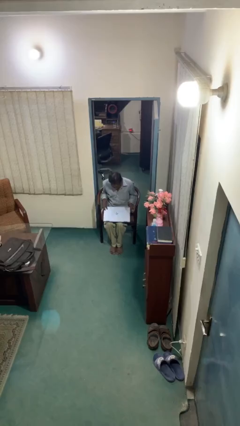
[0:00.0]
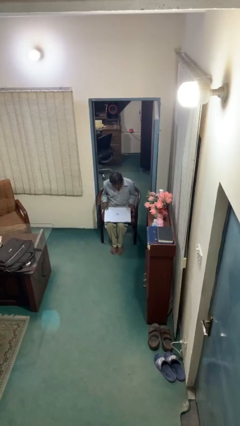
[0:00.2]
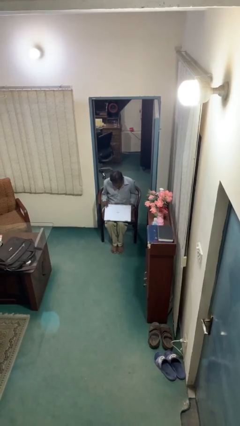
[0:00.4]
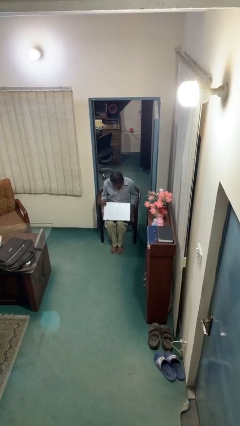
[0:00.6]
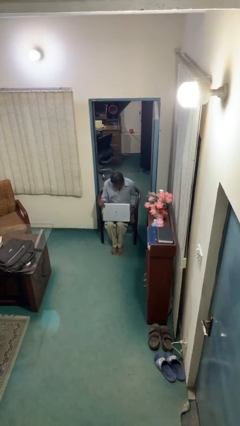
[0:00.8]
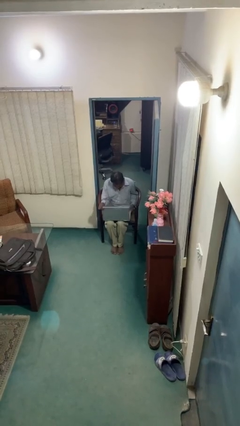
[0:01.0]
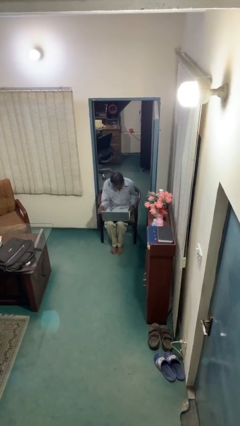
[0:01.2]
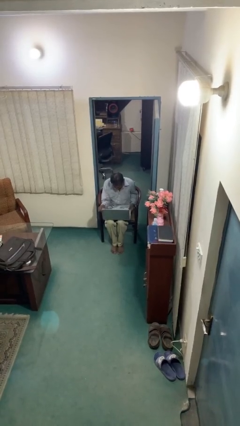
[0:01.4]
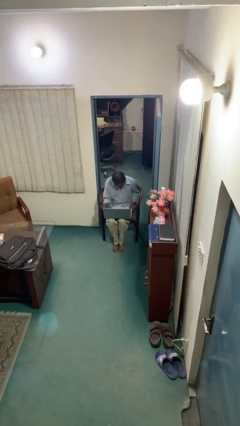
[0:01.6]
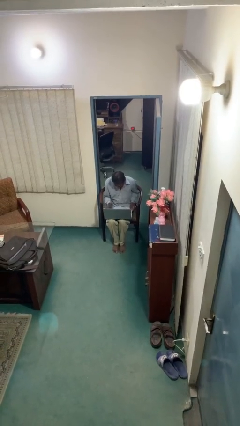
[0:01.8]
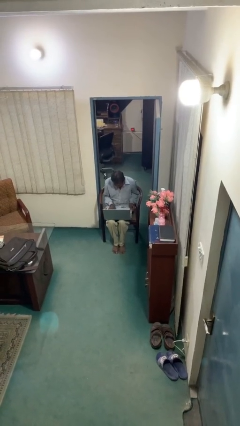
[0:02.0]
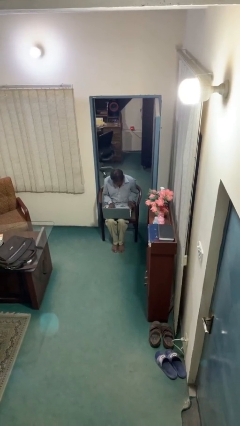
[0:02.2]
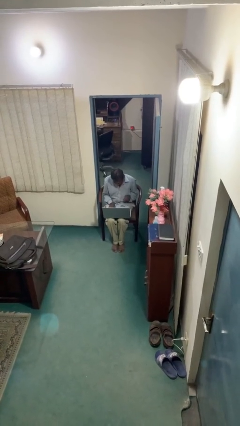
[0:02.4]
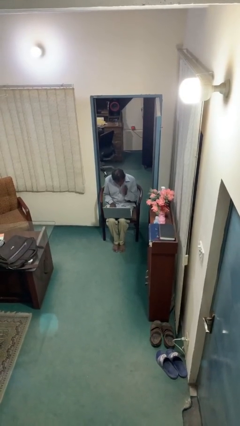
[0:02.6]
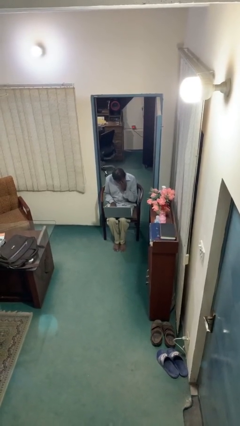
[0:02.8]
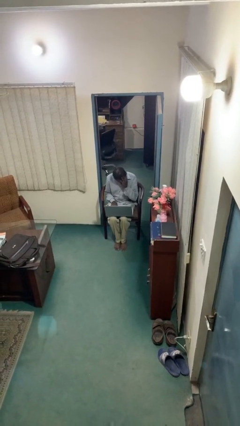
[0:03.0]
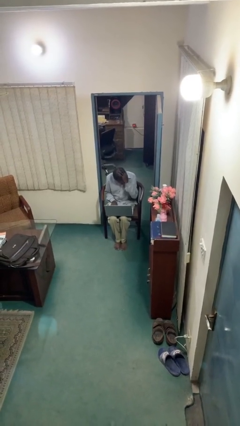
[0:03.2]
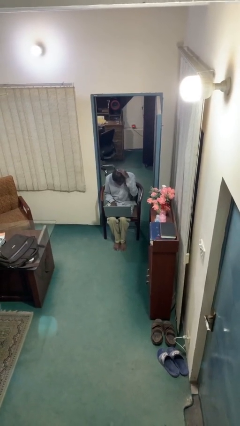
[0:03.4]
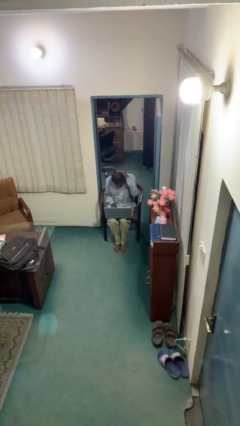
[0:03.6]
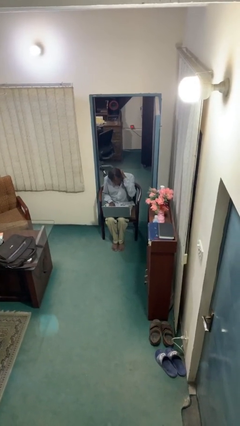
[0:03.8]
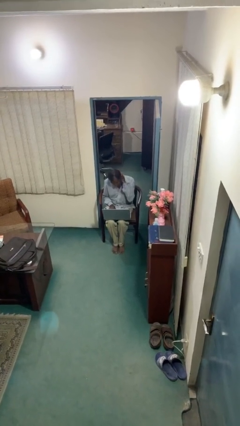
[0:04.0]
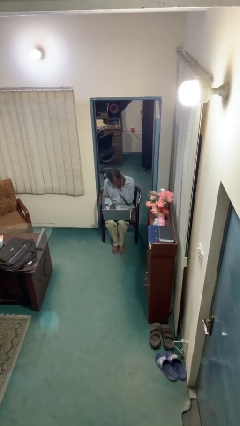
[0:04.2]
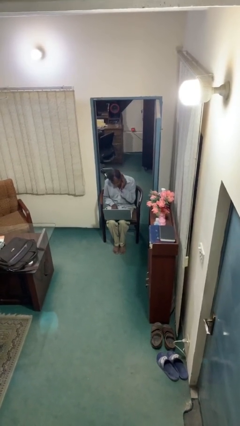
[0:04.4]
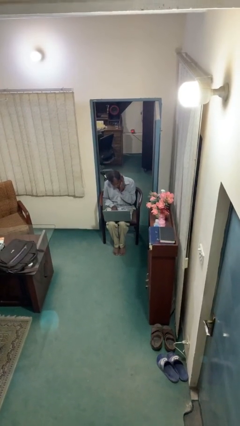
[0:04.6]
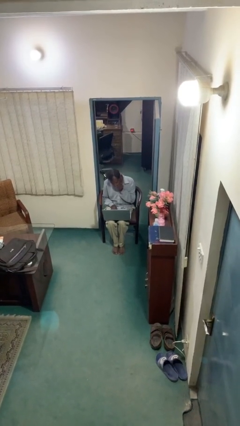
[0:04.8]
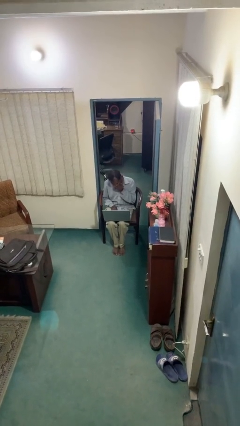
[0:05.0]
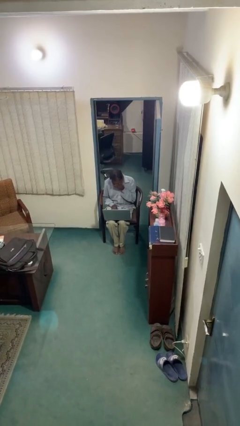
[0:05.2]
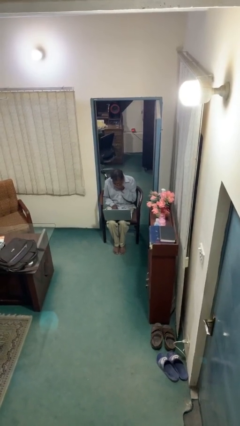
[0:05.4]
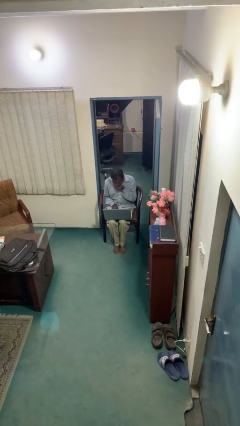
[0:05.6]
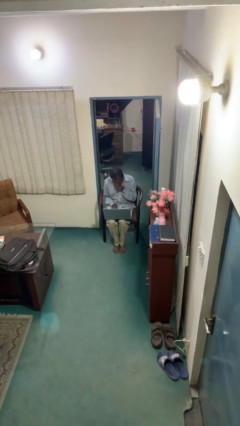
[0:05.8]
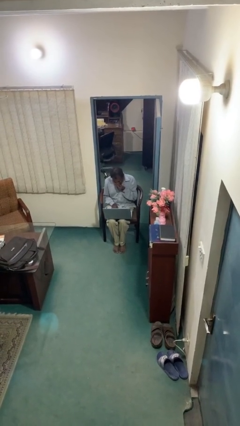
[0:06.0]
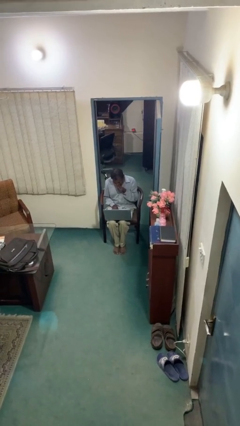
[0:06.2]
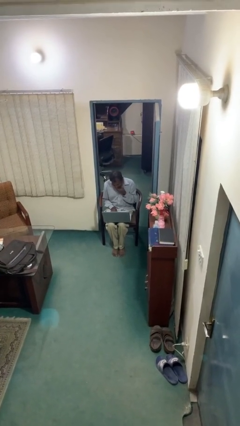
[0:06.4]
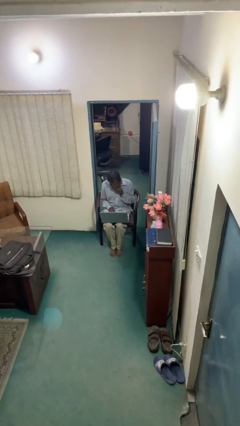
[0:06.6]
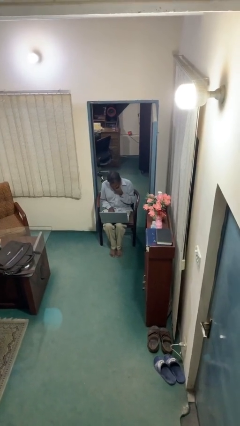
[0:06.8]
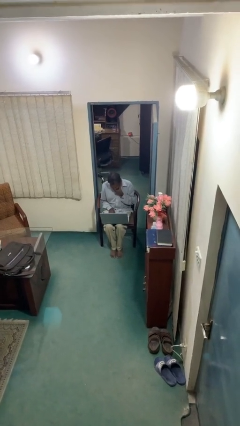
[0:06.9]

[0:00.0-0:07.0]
person interacts with laptop

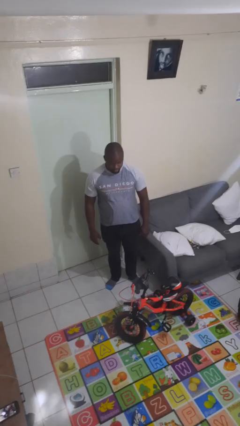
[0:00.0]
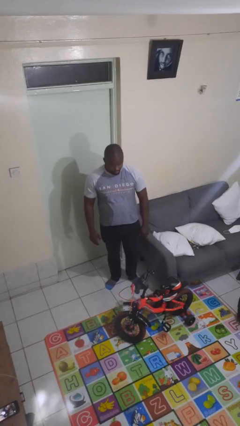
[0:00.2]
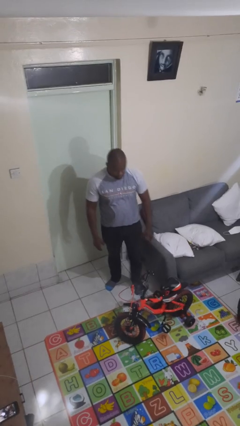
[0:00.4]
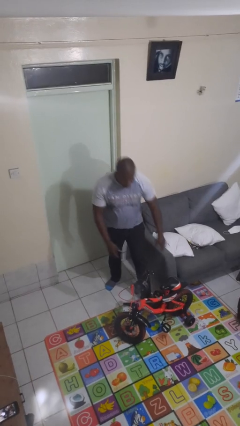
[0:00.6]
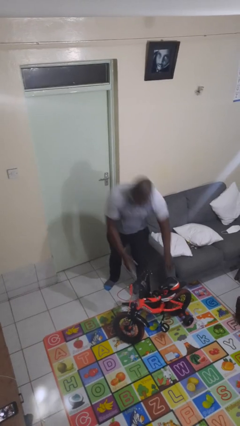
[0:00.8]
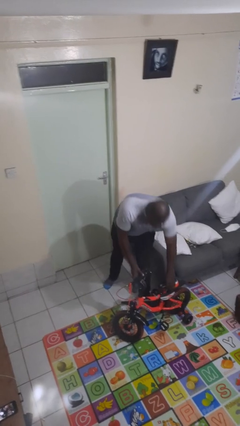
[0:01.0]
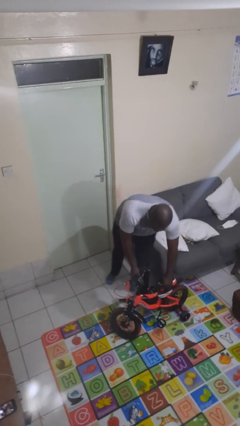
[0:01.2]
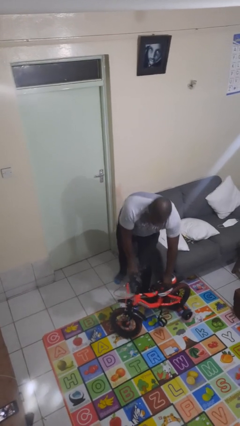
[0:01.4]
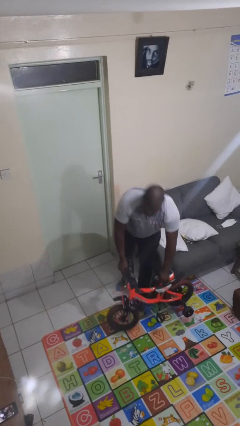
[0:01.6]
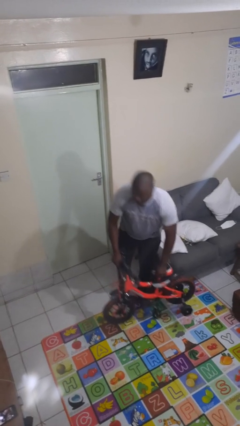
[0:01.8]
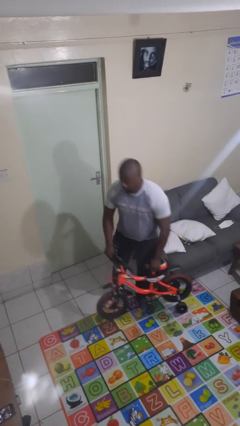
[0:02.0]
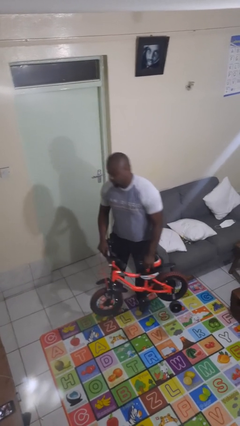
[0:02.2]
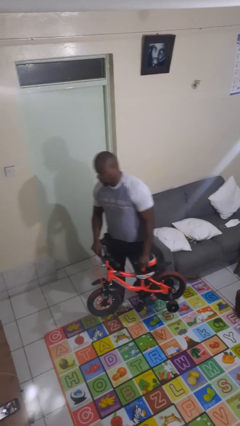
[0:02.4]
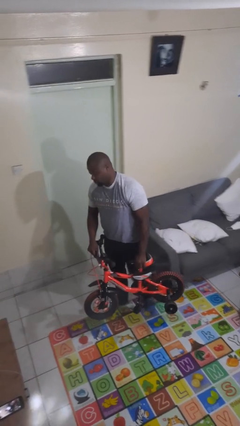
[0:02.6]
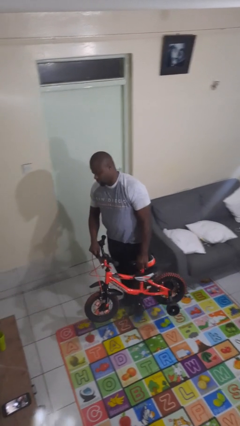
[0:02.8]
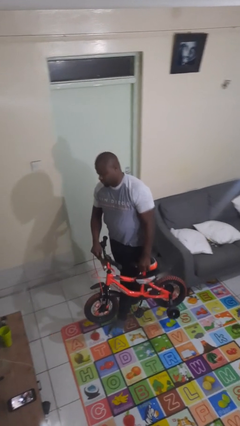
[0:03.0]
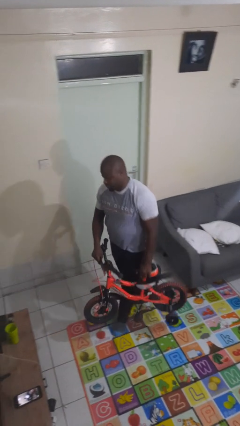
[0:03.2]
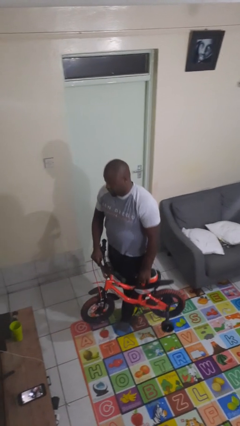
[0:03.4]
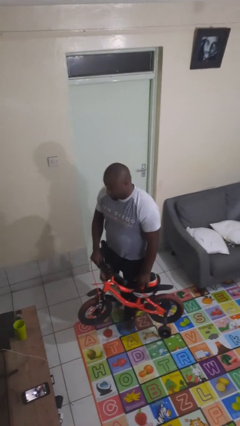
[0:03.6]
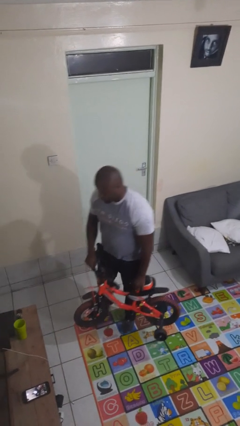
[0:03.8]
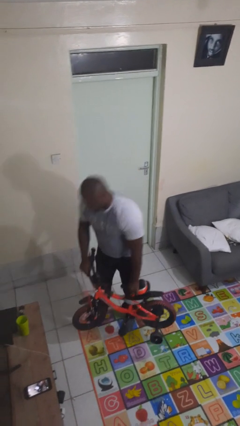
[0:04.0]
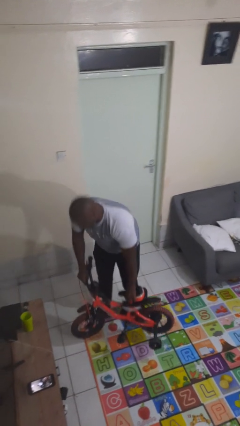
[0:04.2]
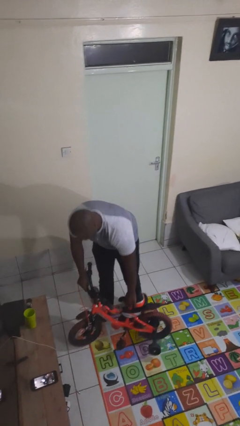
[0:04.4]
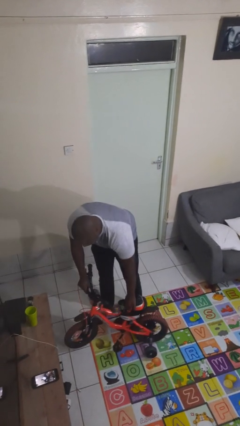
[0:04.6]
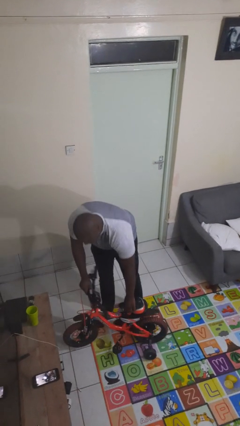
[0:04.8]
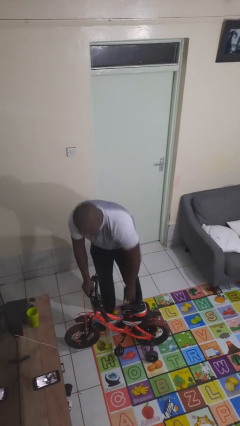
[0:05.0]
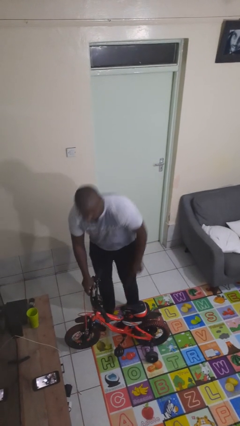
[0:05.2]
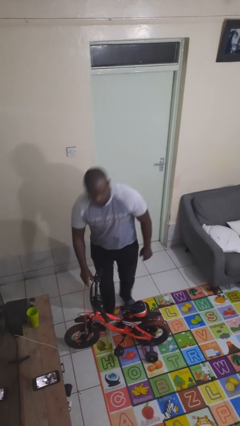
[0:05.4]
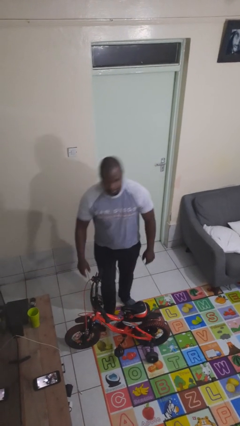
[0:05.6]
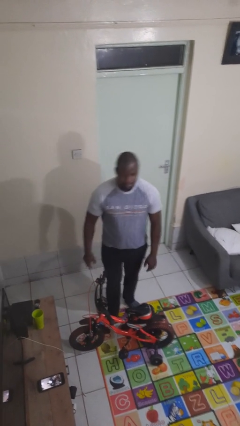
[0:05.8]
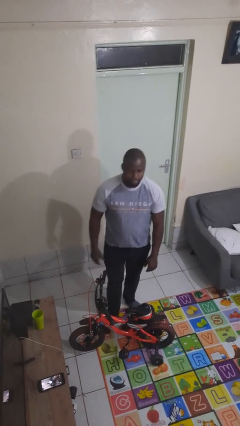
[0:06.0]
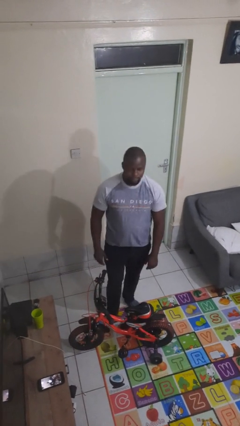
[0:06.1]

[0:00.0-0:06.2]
person carries bicycle

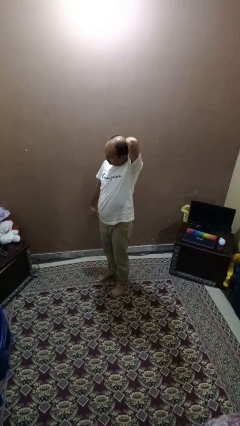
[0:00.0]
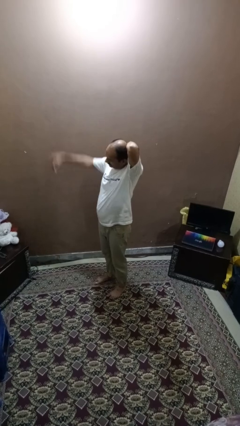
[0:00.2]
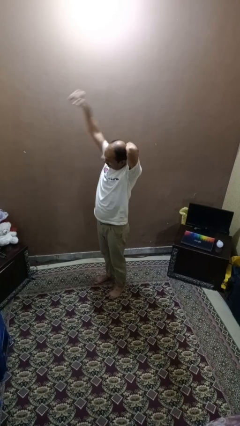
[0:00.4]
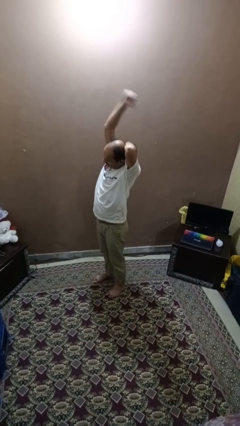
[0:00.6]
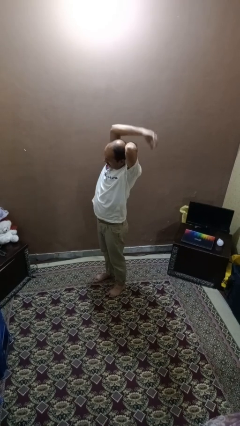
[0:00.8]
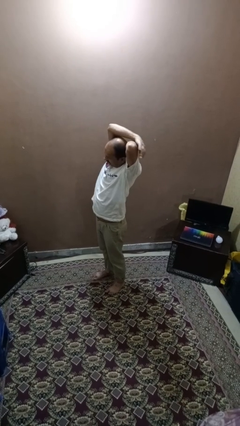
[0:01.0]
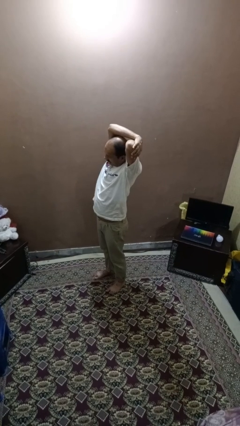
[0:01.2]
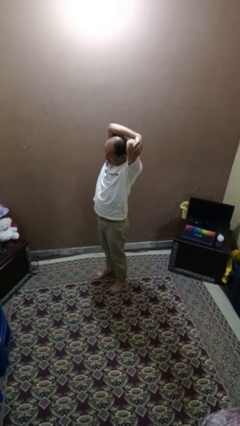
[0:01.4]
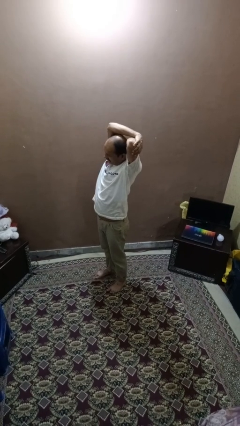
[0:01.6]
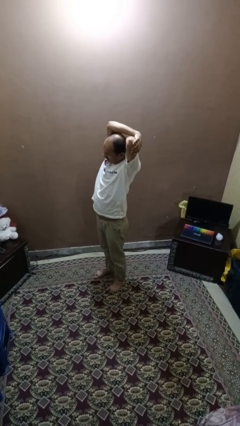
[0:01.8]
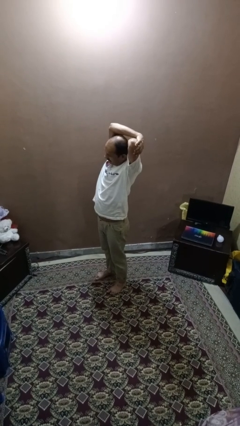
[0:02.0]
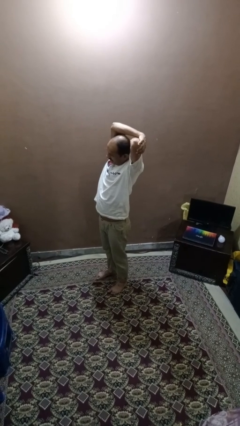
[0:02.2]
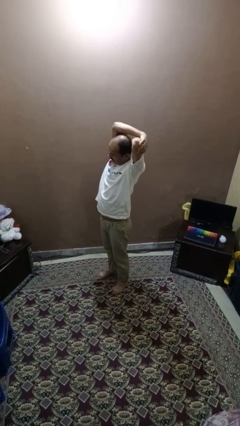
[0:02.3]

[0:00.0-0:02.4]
person stretches arms over head

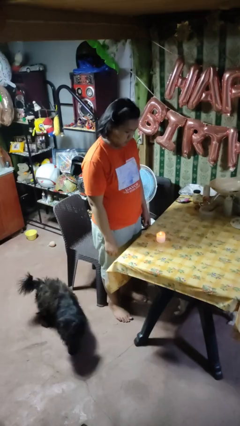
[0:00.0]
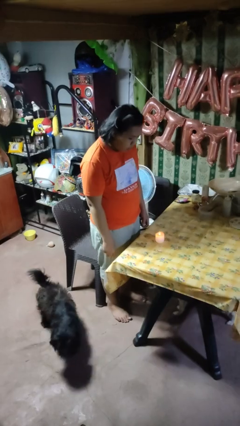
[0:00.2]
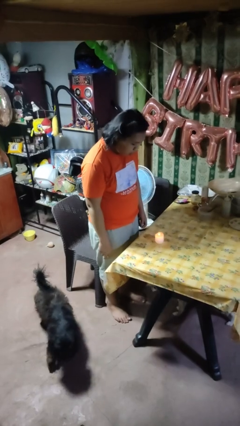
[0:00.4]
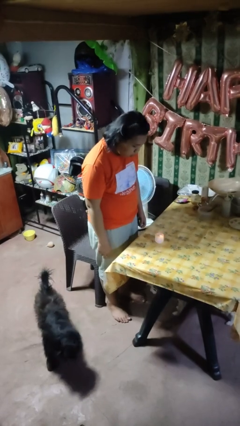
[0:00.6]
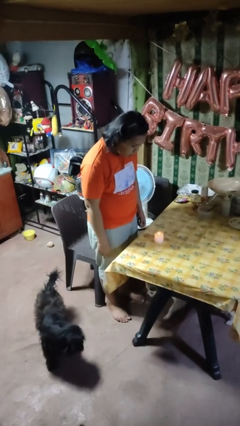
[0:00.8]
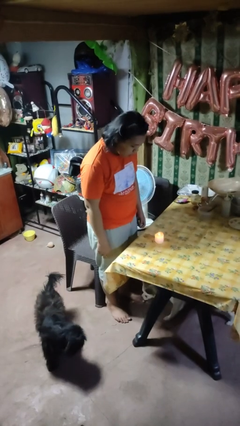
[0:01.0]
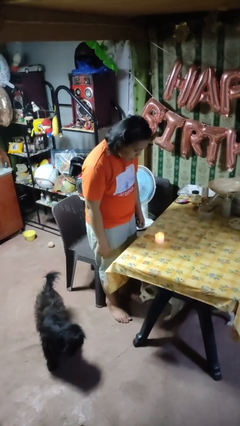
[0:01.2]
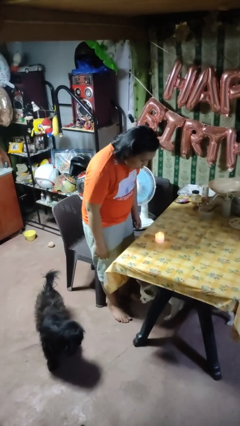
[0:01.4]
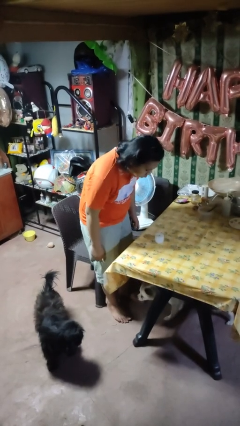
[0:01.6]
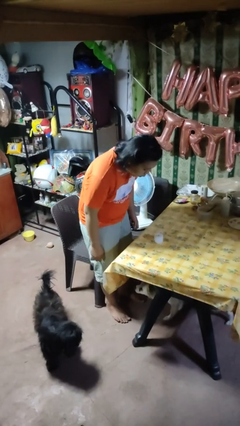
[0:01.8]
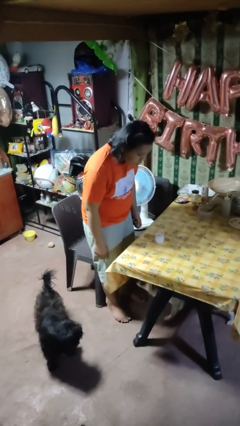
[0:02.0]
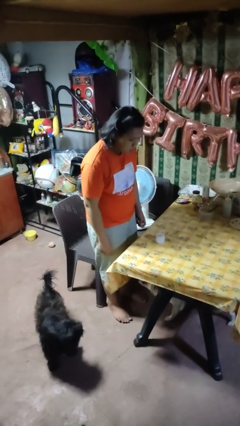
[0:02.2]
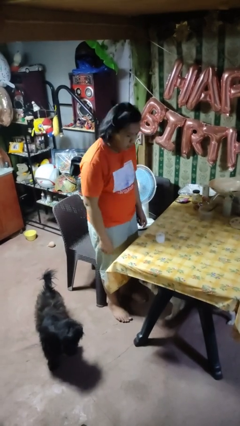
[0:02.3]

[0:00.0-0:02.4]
person extinguishes candle
